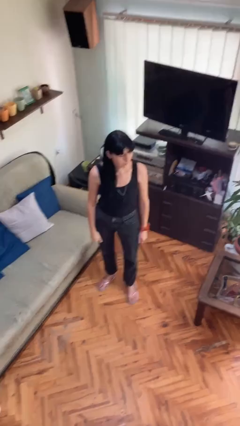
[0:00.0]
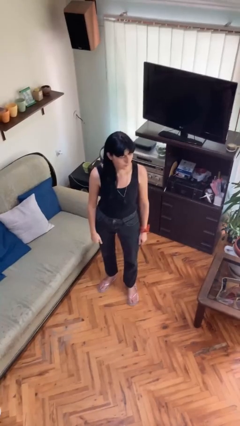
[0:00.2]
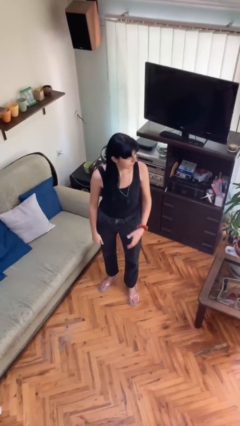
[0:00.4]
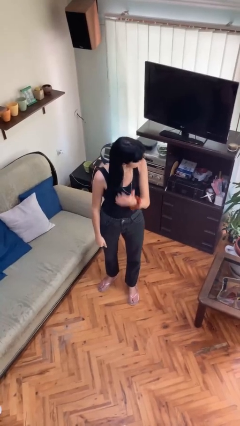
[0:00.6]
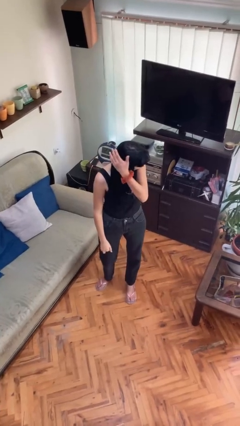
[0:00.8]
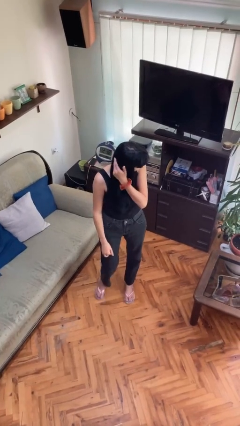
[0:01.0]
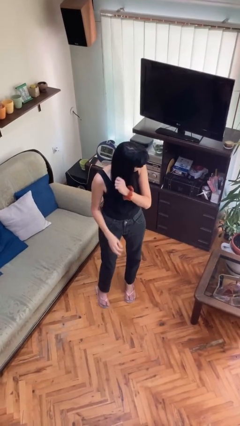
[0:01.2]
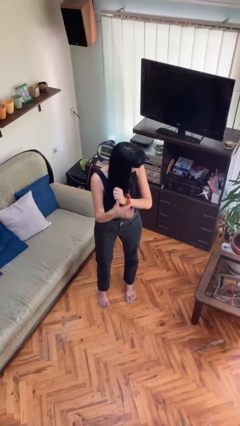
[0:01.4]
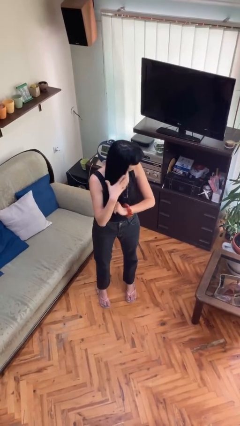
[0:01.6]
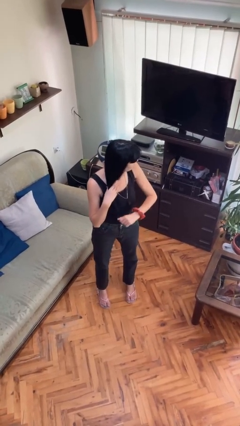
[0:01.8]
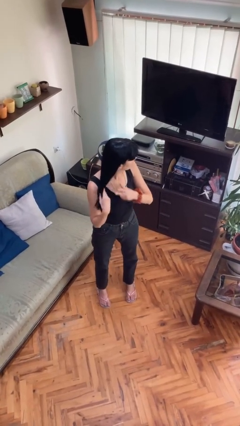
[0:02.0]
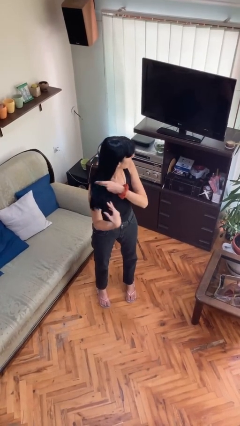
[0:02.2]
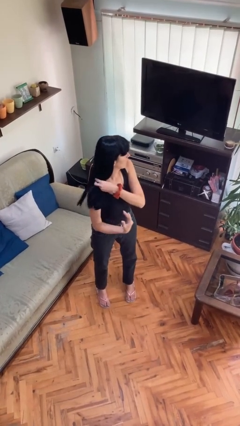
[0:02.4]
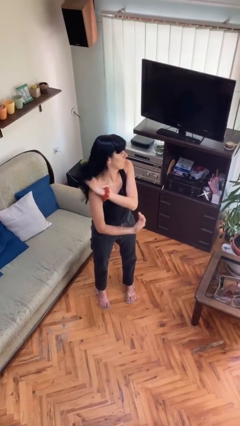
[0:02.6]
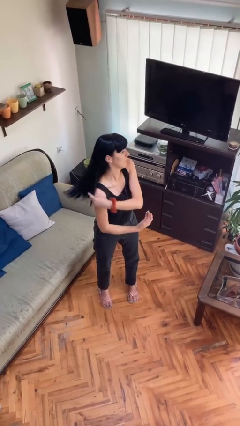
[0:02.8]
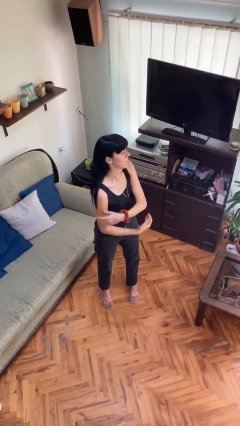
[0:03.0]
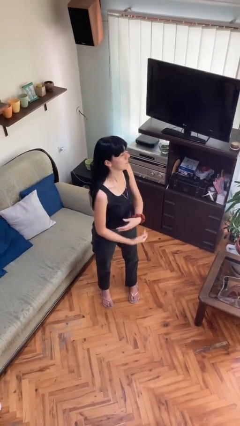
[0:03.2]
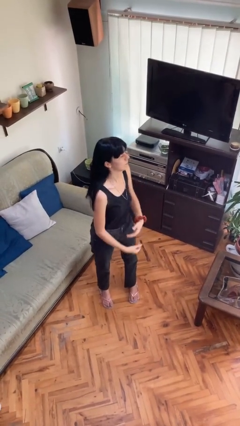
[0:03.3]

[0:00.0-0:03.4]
person strokes hair

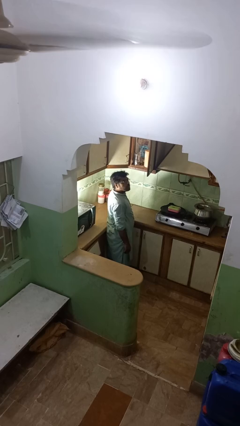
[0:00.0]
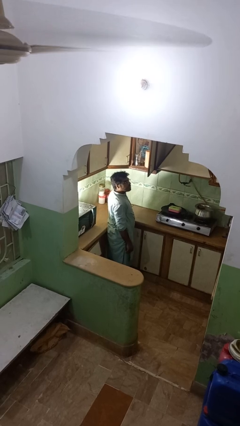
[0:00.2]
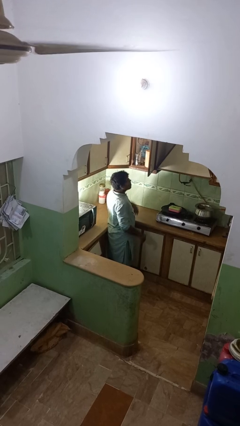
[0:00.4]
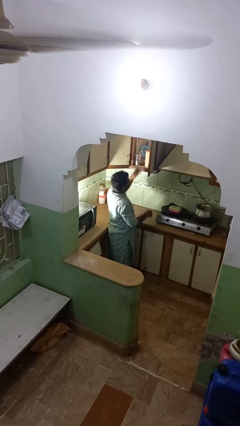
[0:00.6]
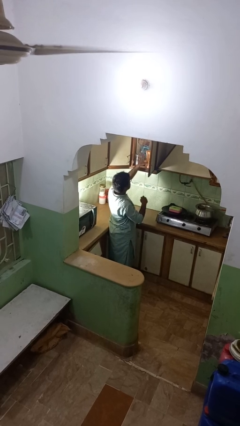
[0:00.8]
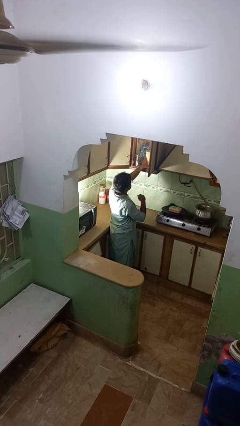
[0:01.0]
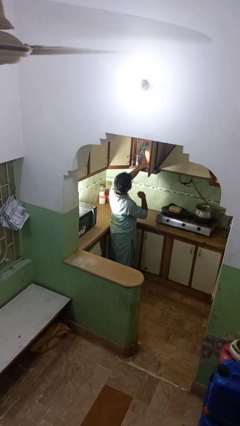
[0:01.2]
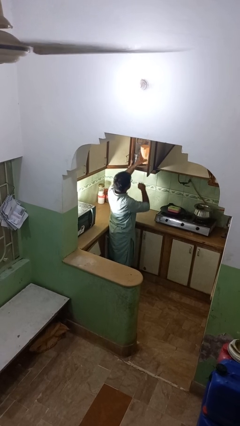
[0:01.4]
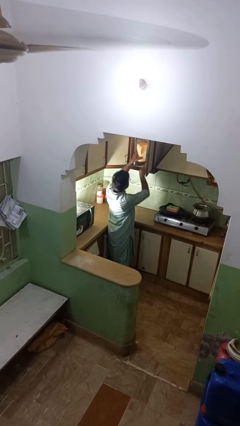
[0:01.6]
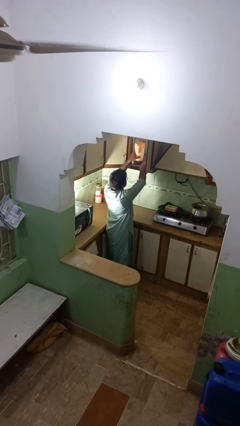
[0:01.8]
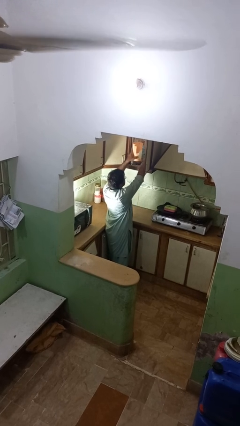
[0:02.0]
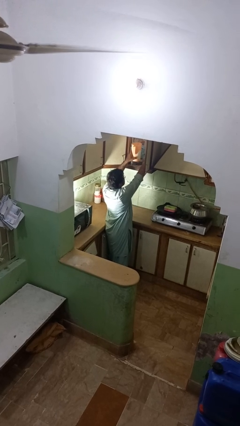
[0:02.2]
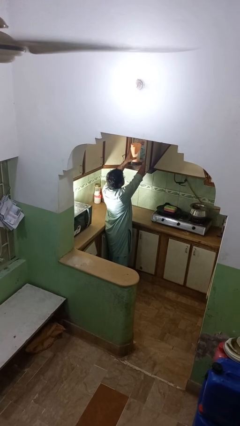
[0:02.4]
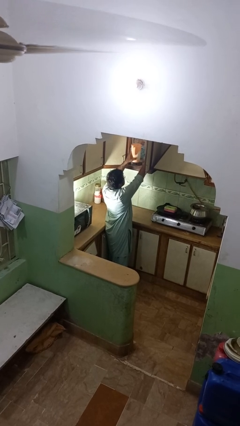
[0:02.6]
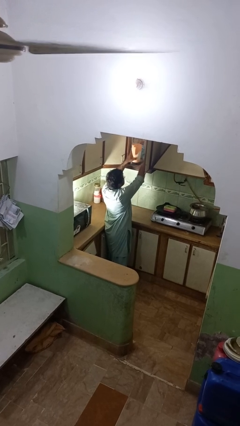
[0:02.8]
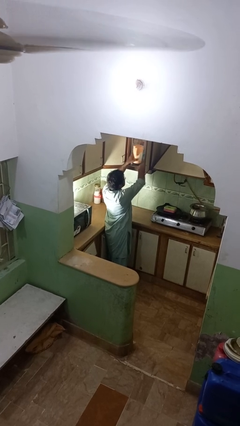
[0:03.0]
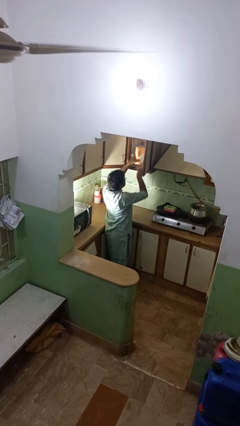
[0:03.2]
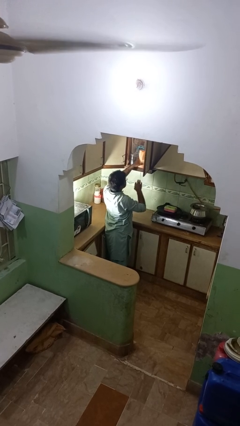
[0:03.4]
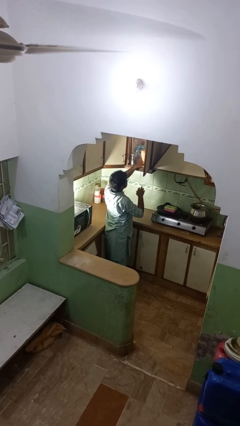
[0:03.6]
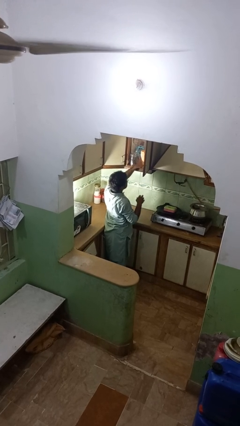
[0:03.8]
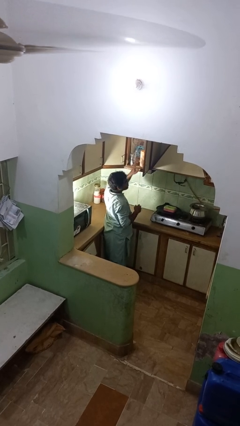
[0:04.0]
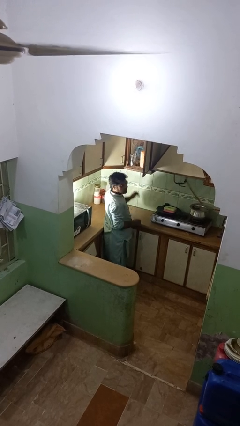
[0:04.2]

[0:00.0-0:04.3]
person searches in kitchen drawer

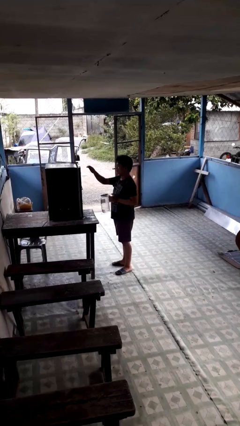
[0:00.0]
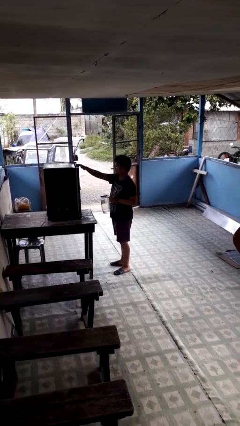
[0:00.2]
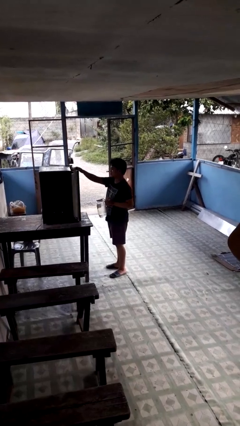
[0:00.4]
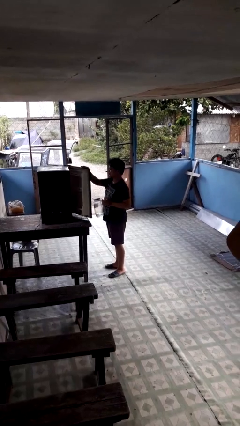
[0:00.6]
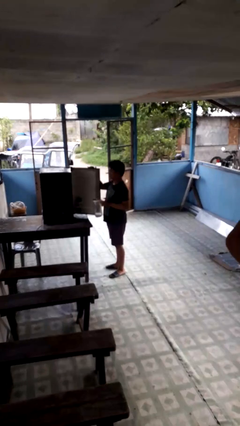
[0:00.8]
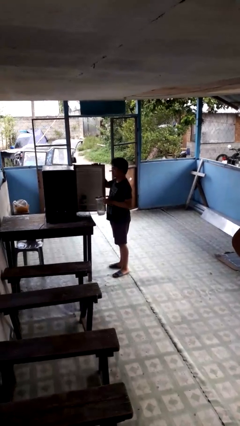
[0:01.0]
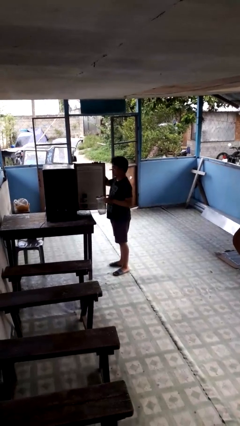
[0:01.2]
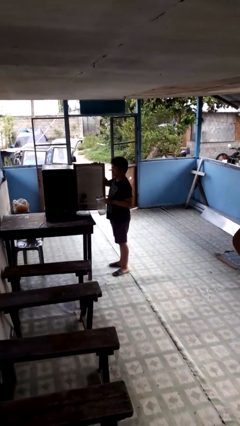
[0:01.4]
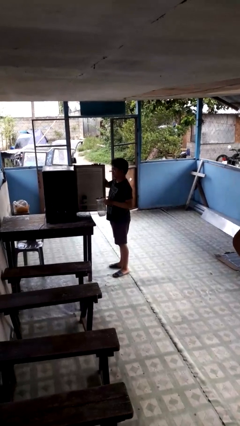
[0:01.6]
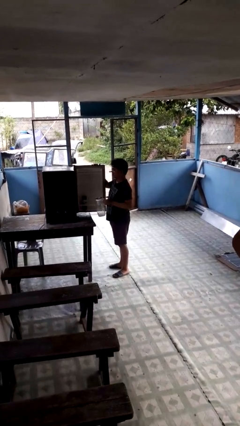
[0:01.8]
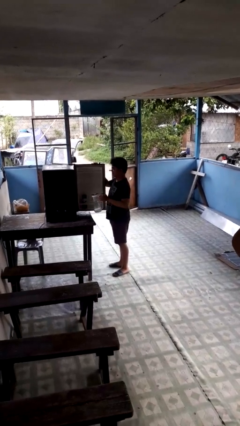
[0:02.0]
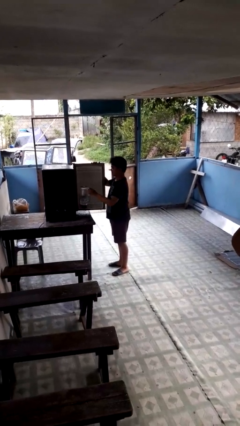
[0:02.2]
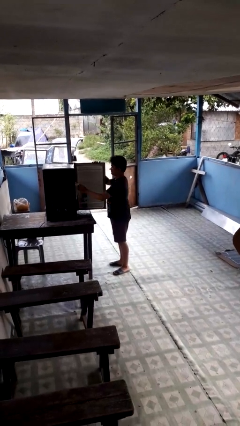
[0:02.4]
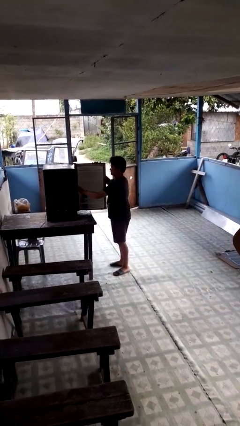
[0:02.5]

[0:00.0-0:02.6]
person opens refrigerator

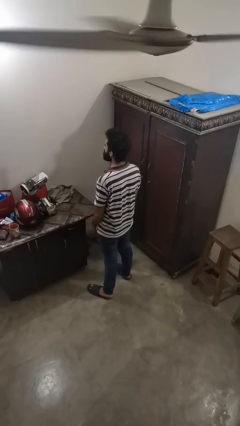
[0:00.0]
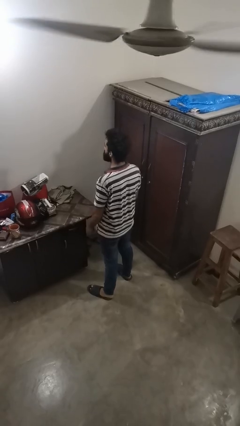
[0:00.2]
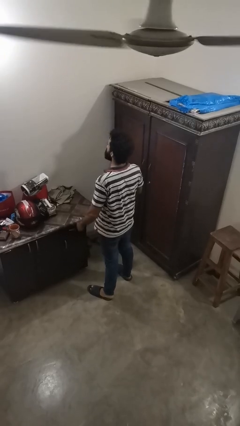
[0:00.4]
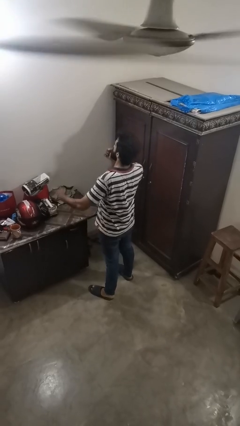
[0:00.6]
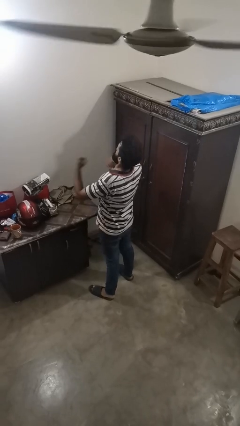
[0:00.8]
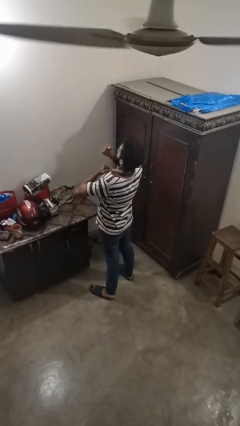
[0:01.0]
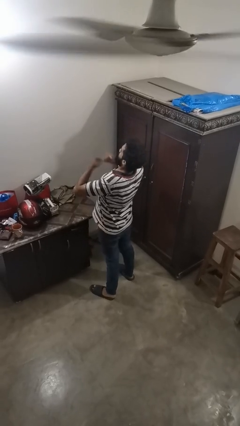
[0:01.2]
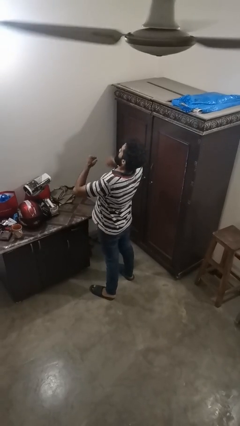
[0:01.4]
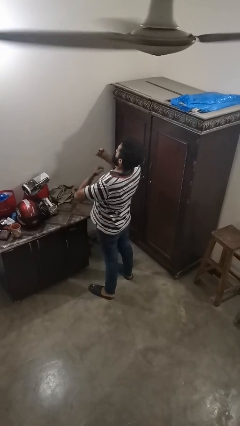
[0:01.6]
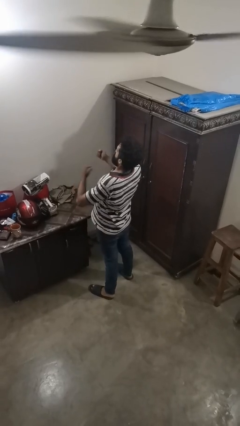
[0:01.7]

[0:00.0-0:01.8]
person drums on chest

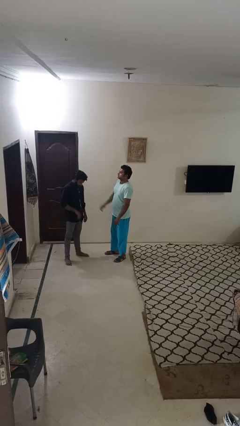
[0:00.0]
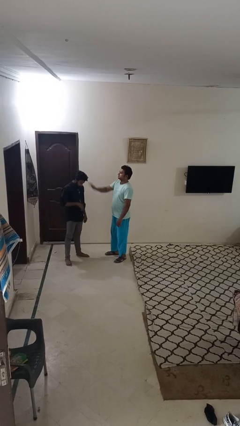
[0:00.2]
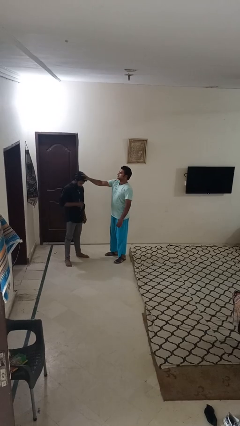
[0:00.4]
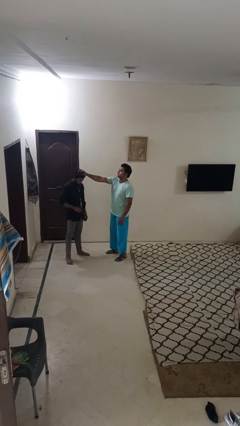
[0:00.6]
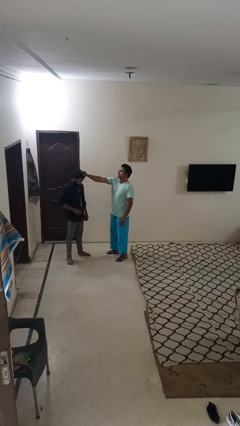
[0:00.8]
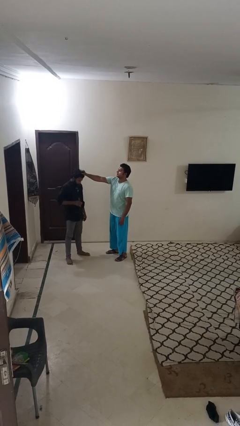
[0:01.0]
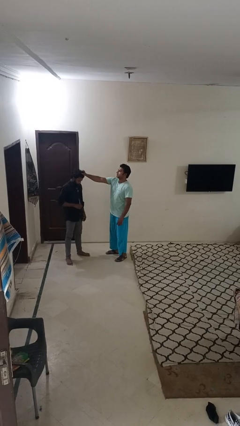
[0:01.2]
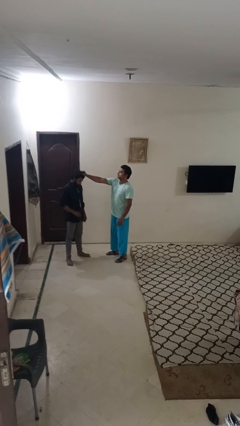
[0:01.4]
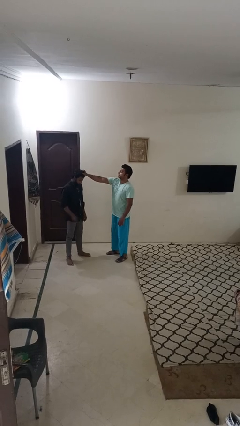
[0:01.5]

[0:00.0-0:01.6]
person grabs person by hair

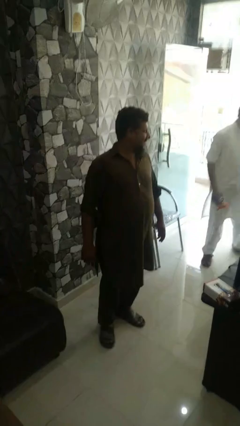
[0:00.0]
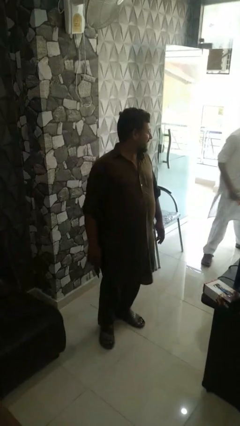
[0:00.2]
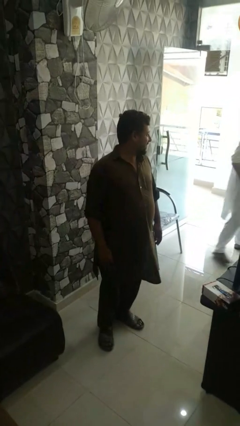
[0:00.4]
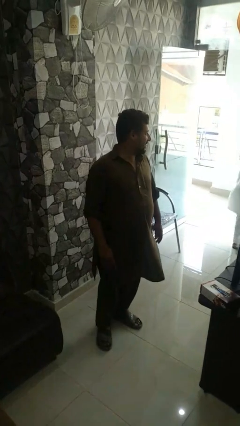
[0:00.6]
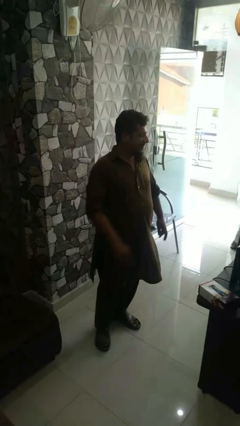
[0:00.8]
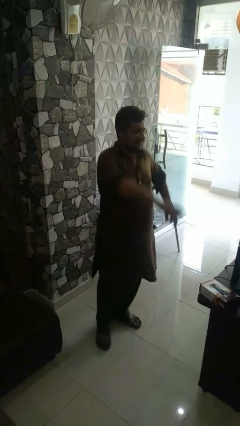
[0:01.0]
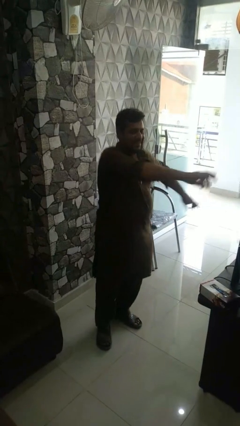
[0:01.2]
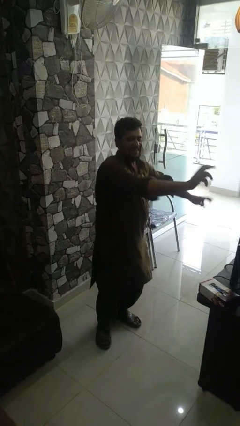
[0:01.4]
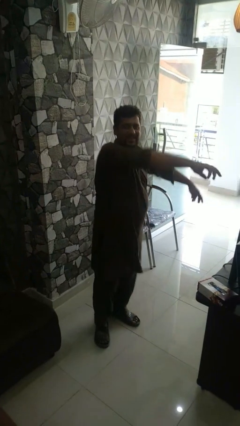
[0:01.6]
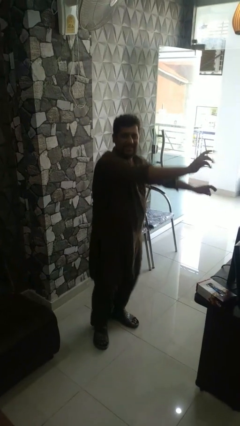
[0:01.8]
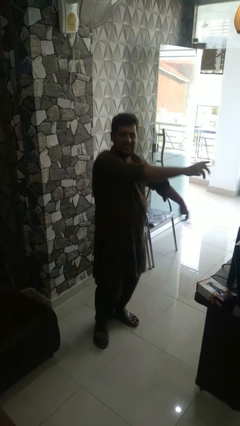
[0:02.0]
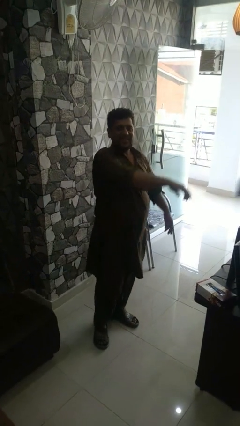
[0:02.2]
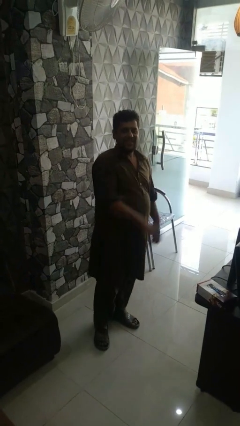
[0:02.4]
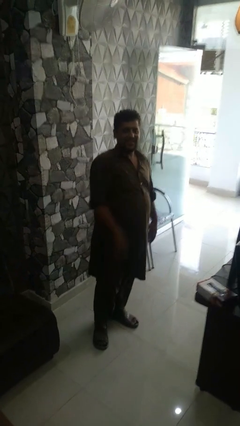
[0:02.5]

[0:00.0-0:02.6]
person dances in place

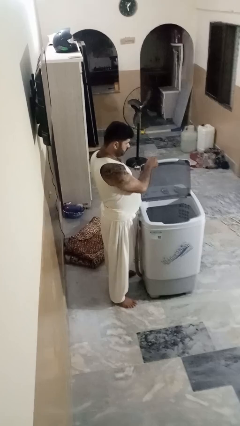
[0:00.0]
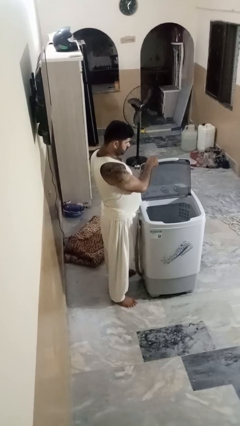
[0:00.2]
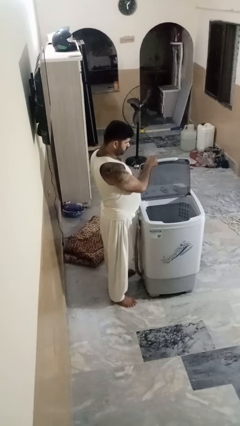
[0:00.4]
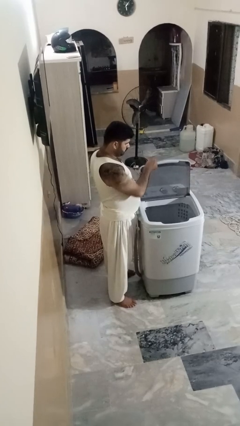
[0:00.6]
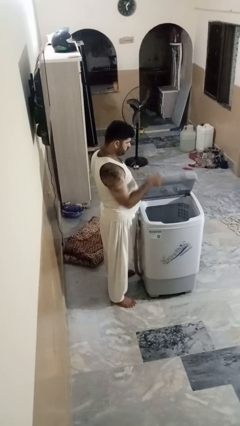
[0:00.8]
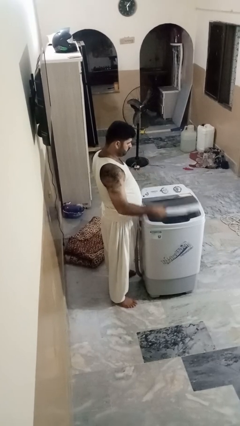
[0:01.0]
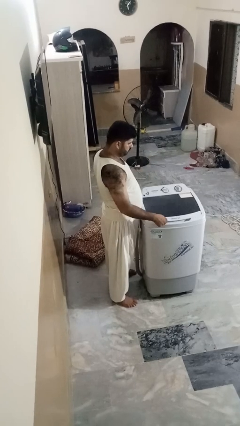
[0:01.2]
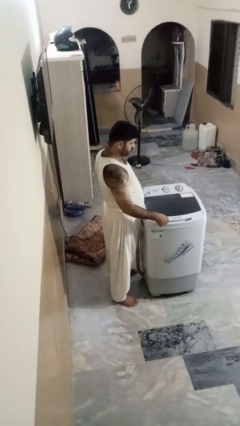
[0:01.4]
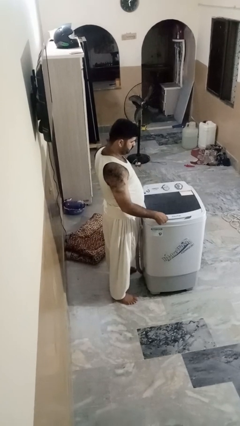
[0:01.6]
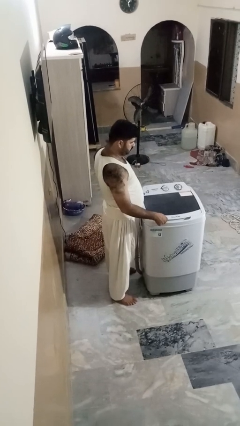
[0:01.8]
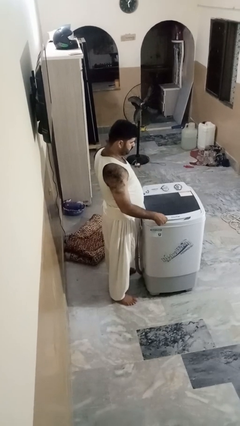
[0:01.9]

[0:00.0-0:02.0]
person closes clothes washer
